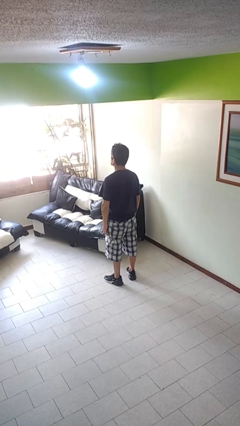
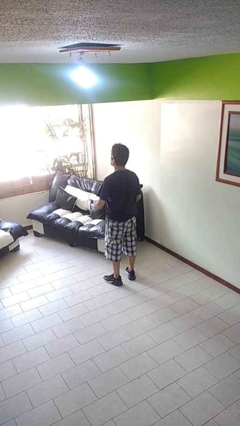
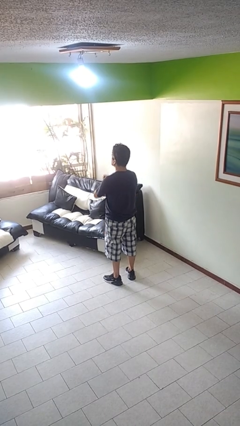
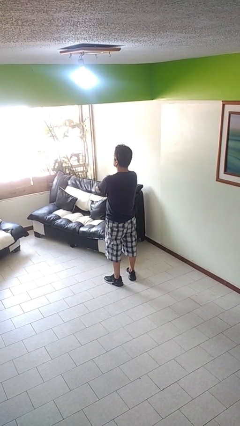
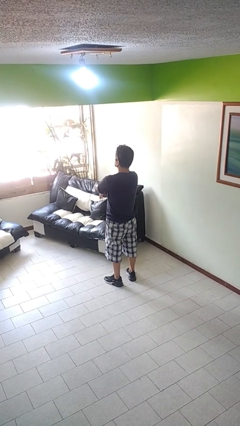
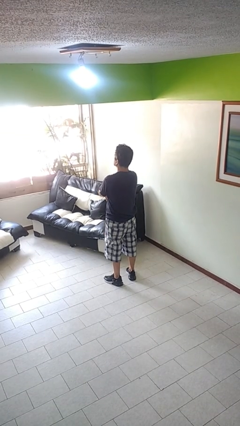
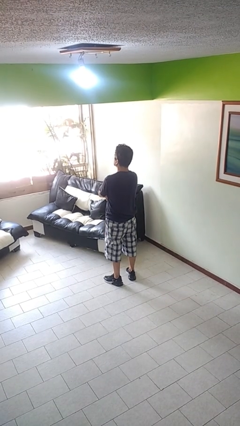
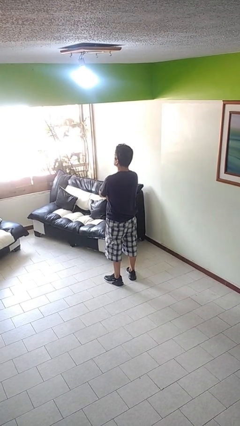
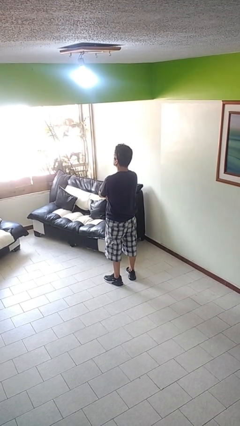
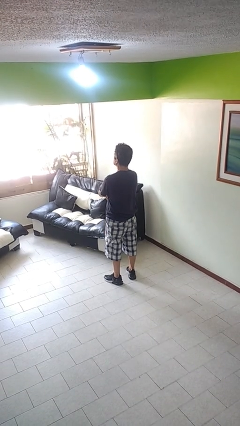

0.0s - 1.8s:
person crosses arms

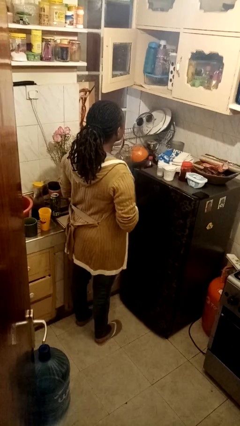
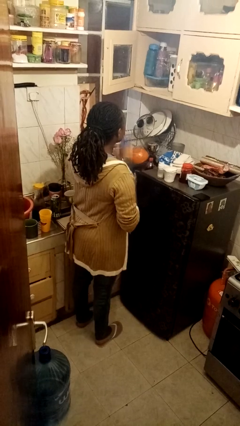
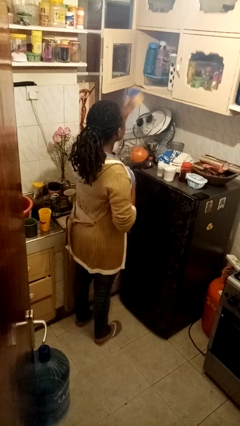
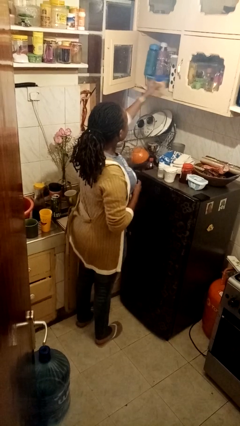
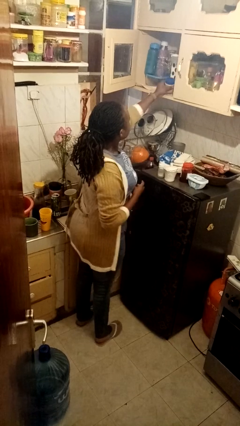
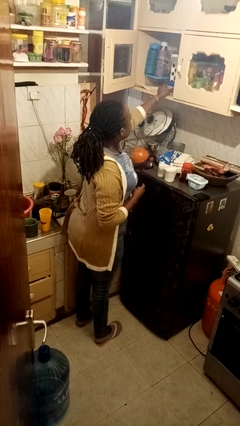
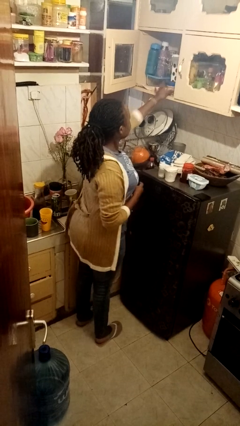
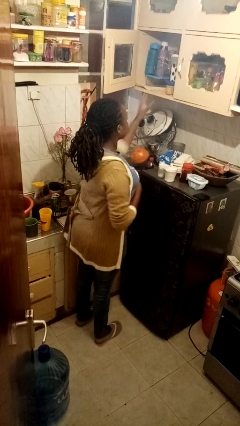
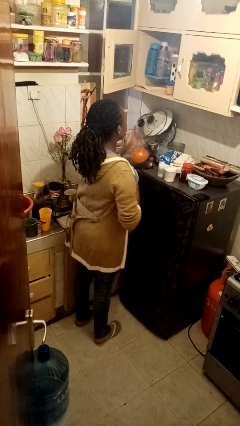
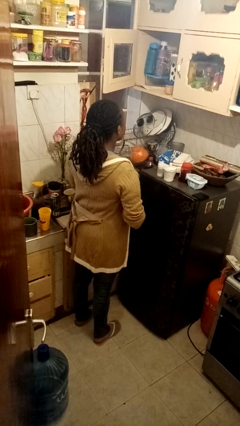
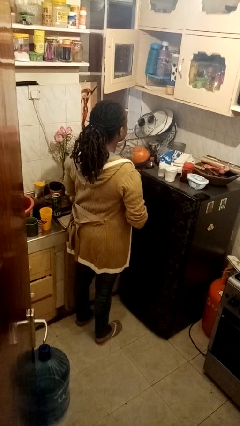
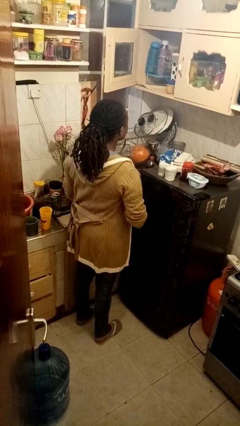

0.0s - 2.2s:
person puts down object into cabinet

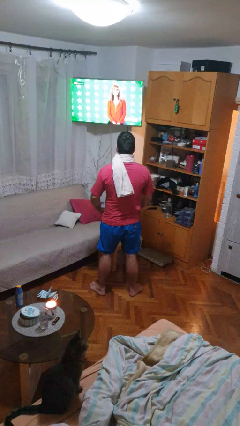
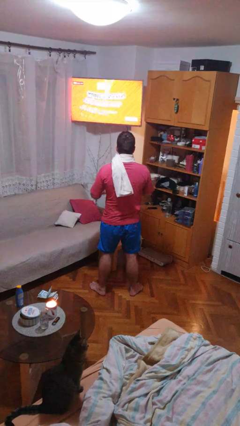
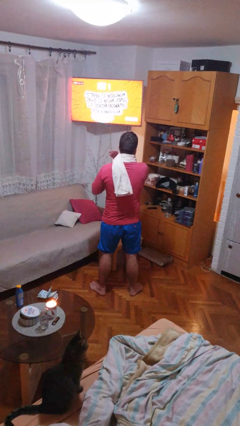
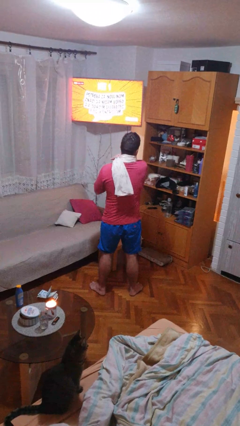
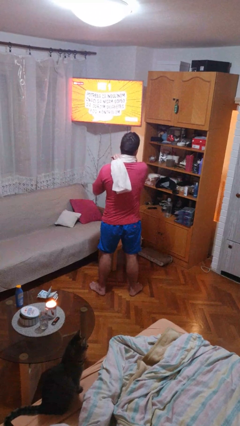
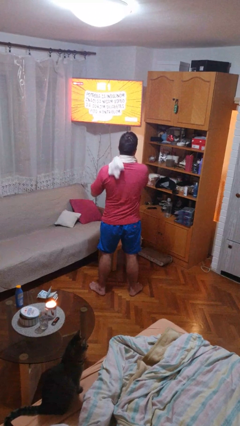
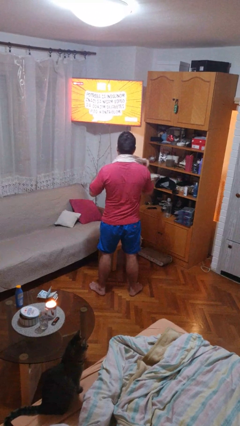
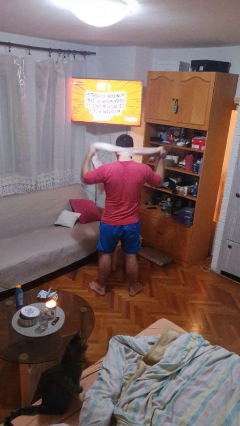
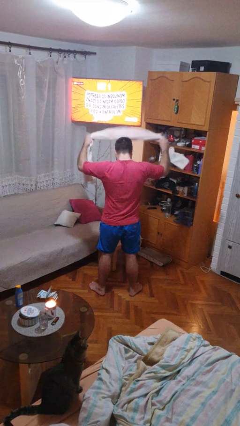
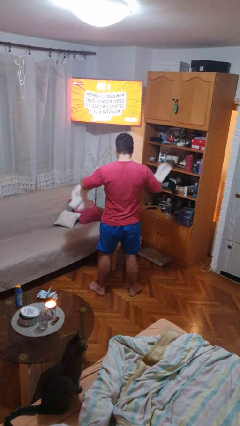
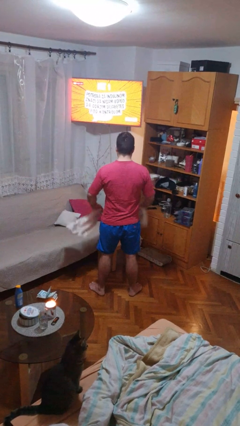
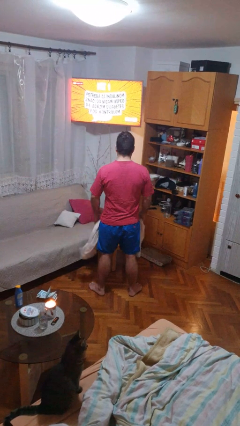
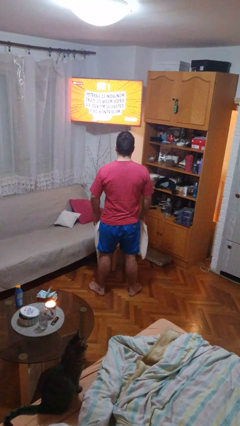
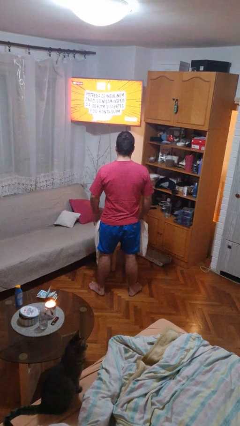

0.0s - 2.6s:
person takes off scarf

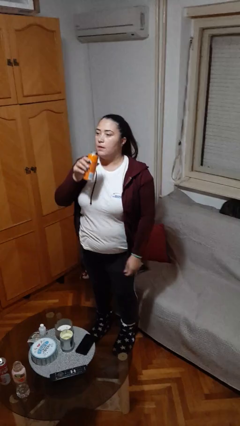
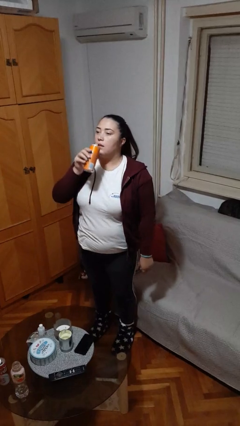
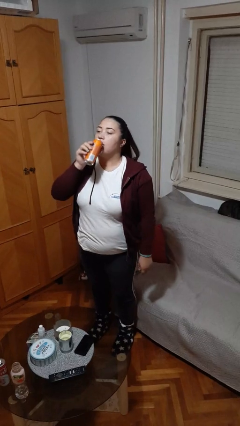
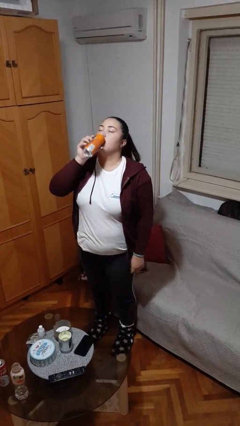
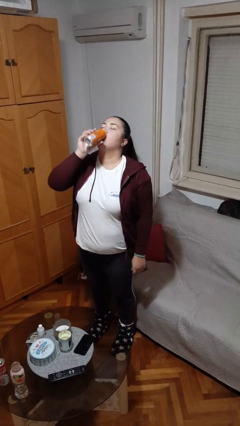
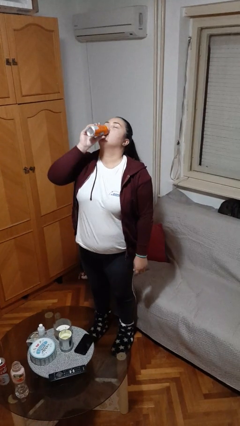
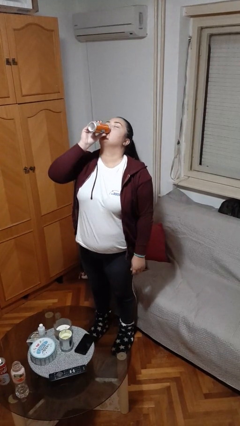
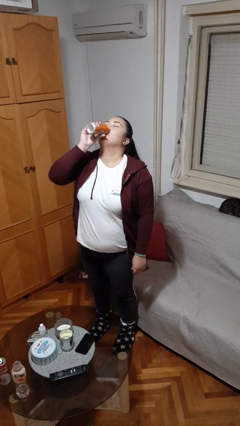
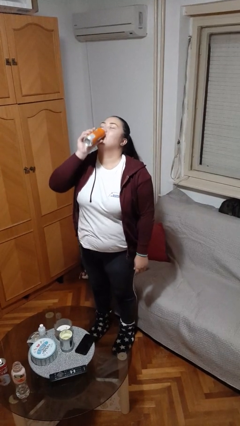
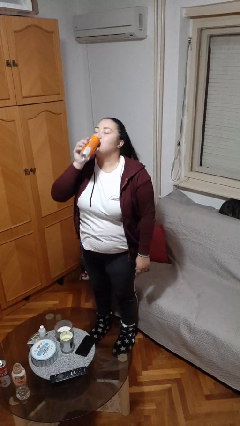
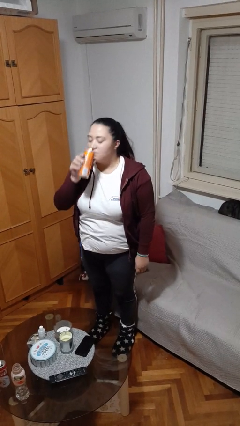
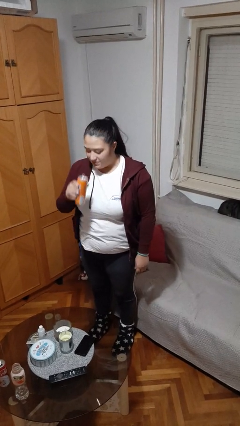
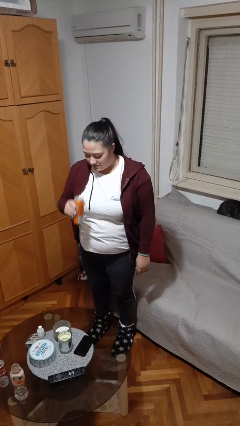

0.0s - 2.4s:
person drinks from beverage can

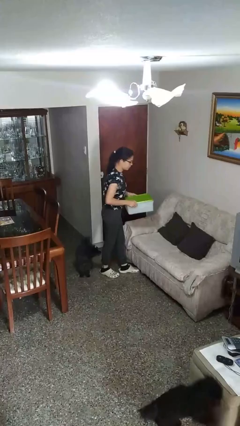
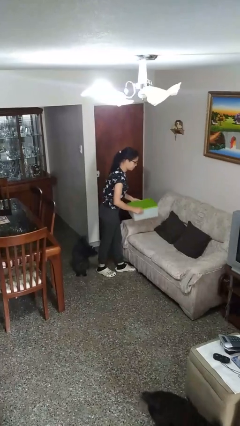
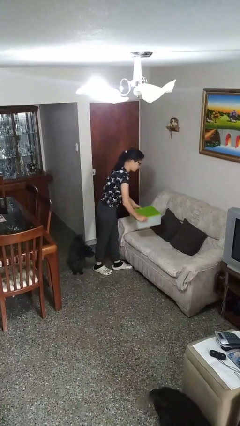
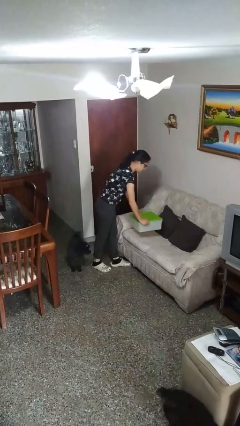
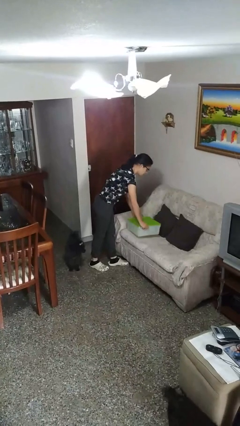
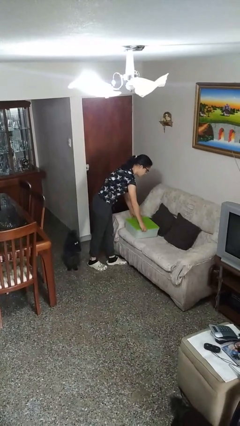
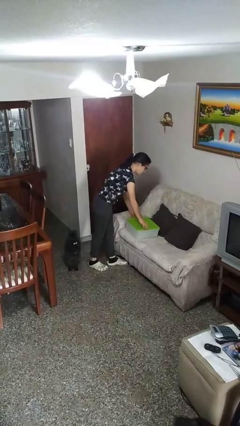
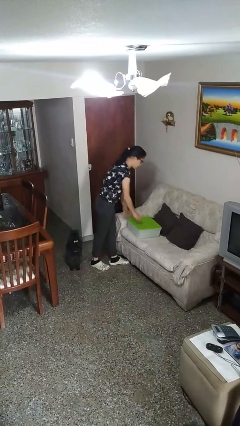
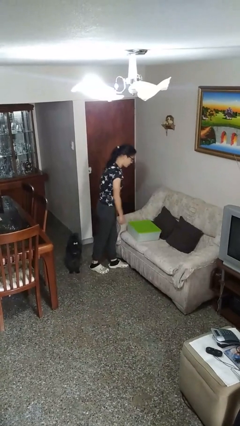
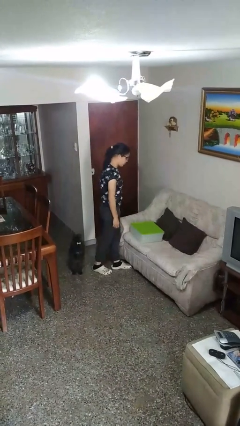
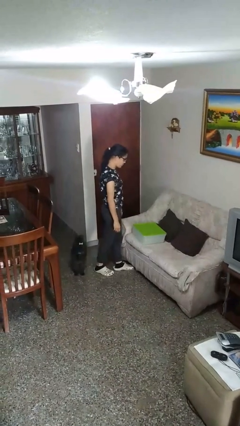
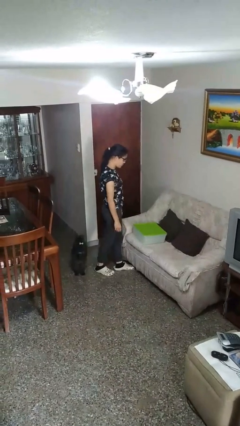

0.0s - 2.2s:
person puts down object on couch

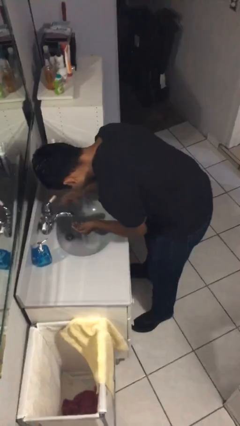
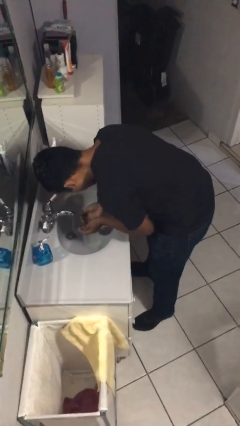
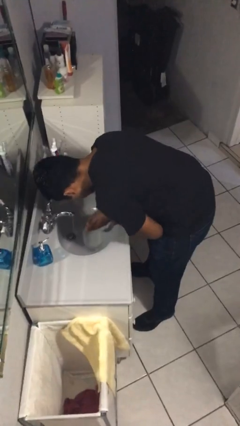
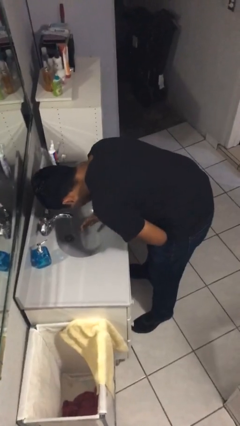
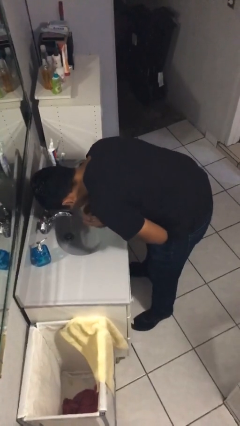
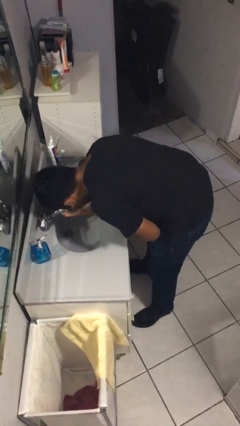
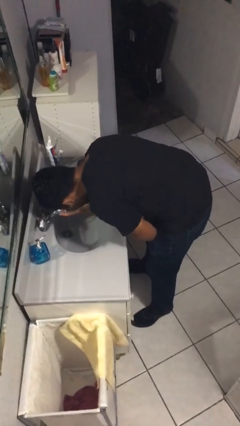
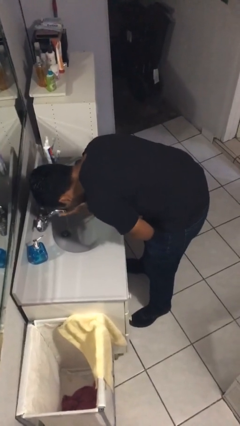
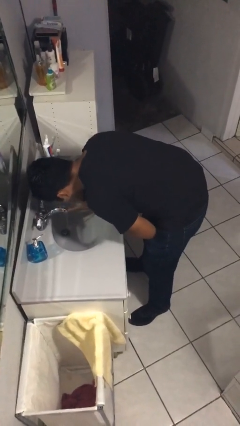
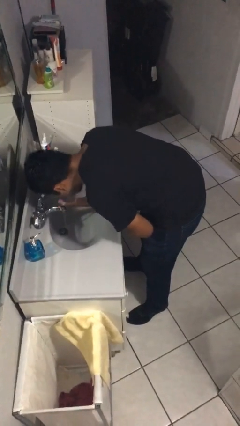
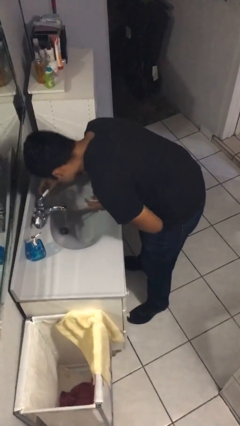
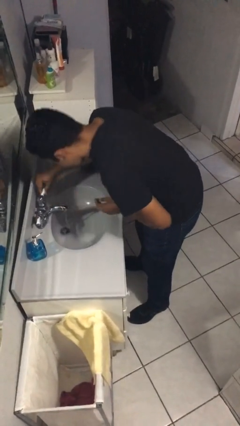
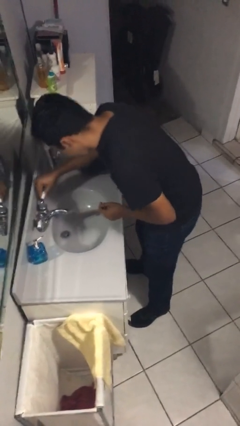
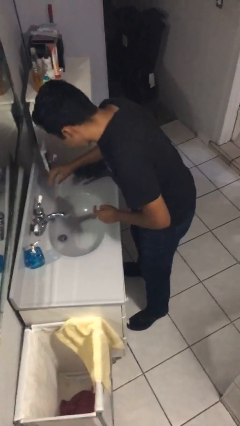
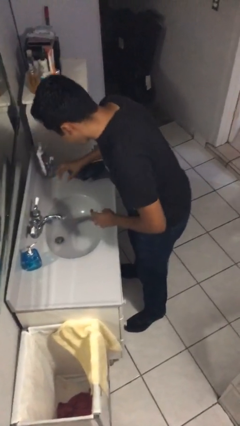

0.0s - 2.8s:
person washes face

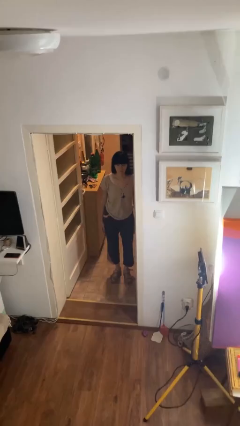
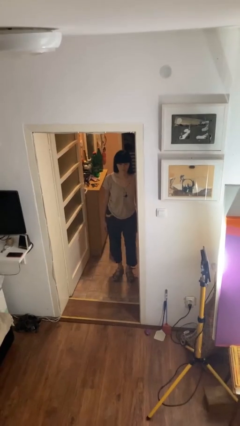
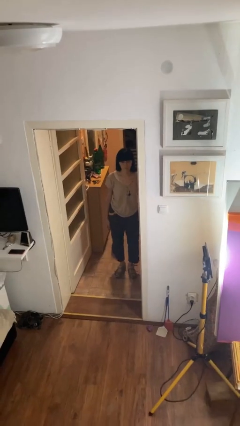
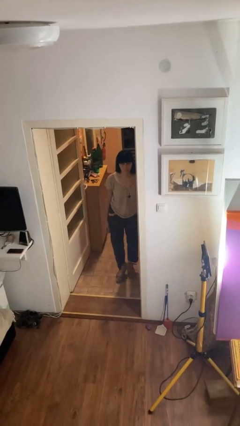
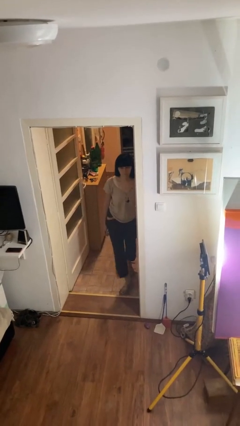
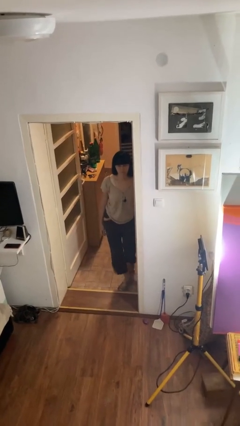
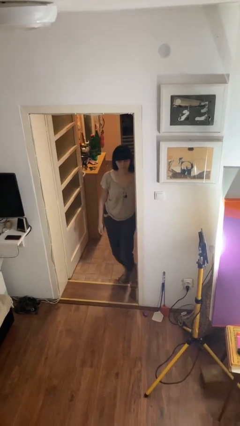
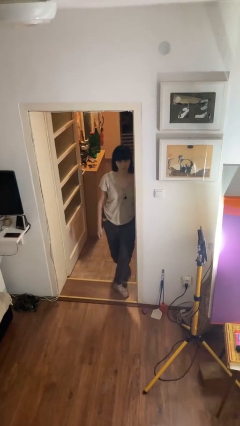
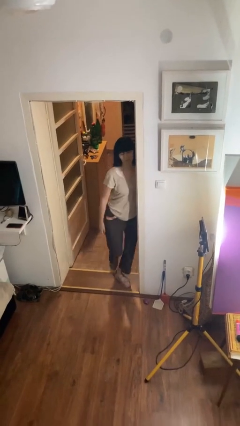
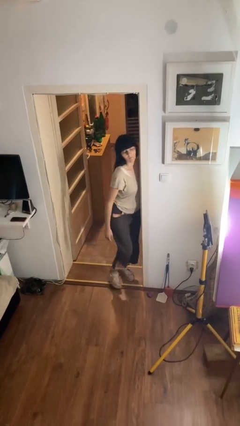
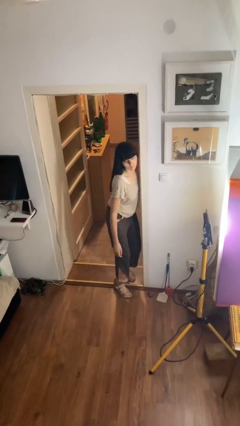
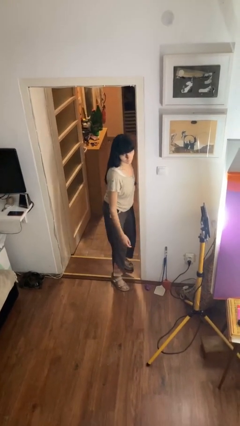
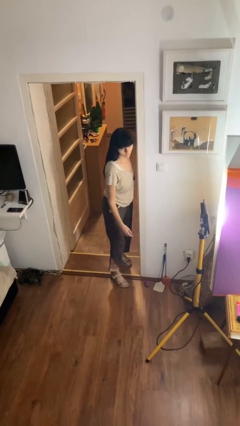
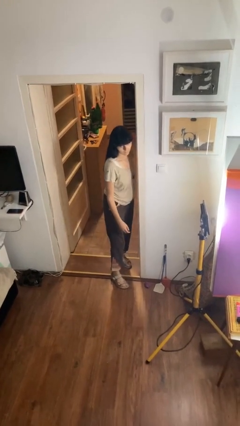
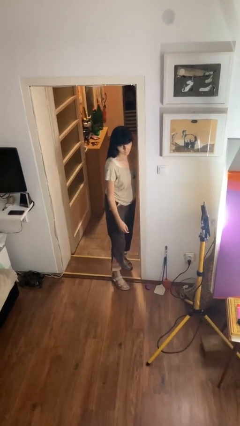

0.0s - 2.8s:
person bumps into wall
